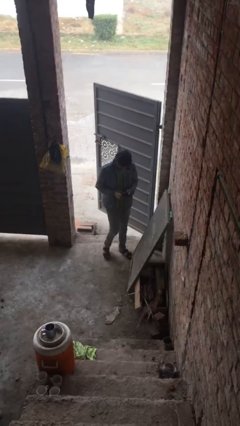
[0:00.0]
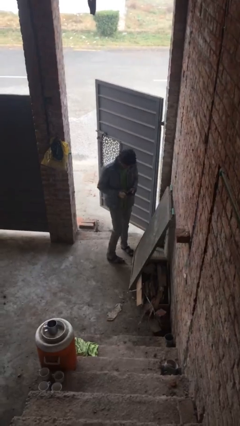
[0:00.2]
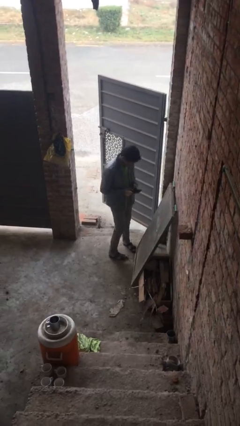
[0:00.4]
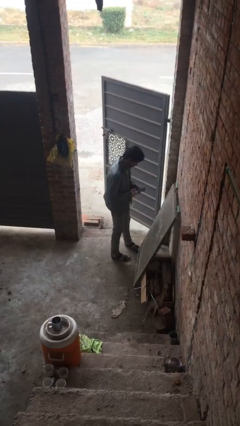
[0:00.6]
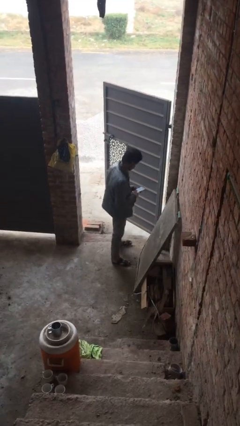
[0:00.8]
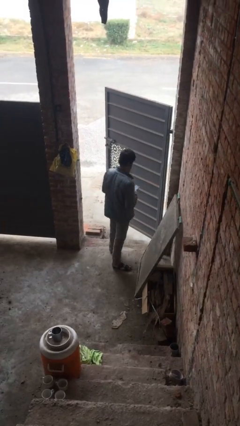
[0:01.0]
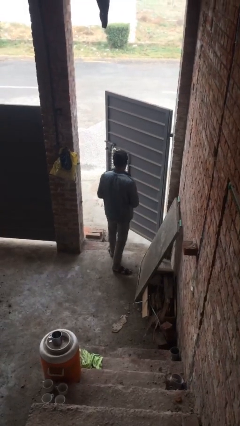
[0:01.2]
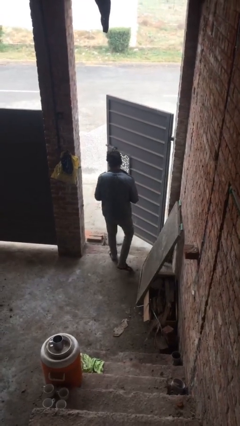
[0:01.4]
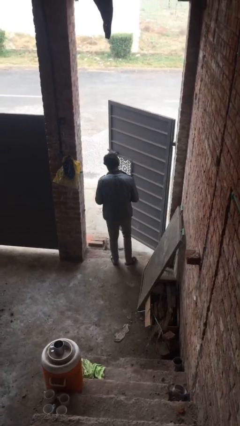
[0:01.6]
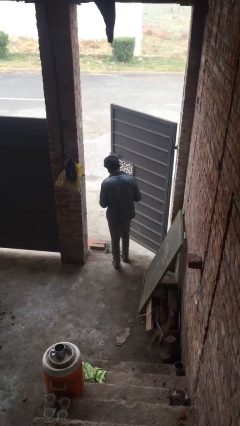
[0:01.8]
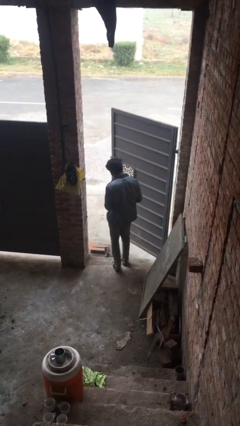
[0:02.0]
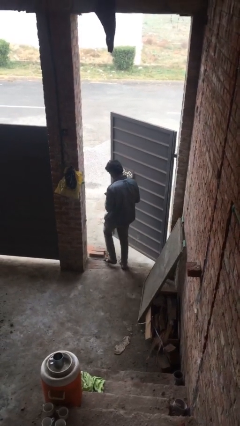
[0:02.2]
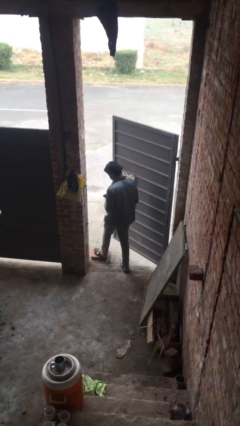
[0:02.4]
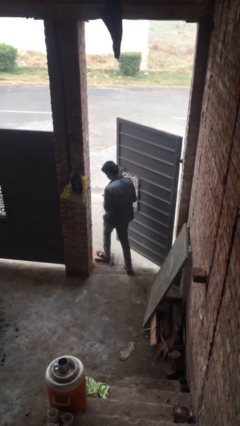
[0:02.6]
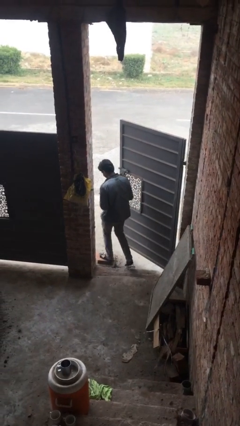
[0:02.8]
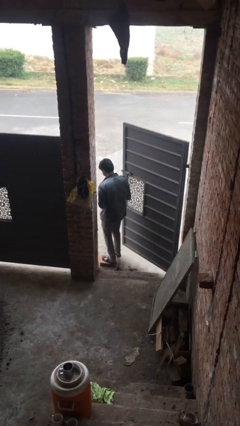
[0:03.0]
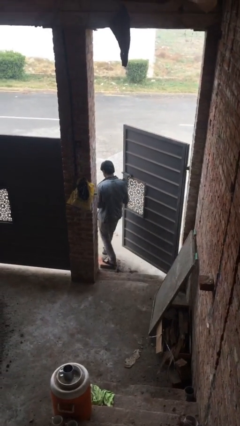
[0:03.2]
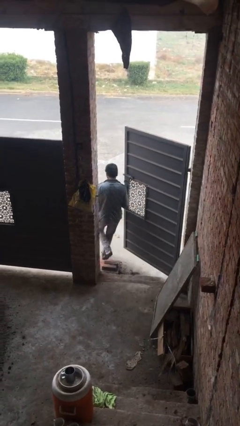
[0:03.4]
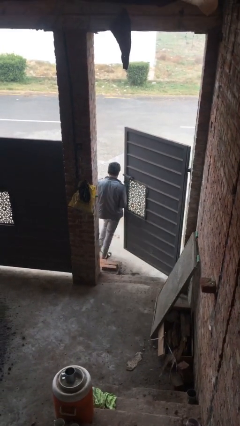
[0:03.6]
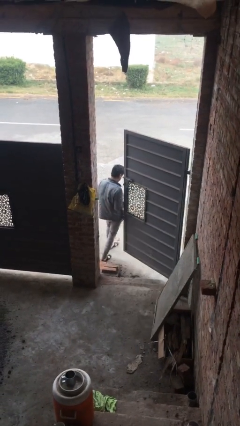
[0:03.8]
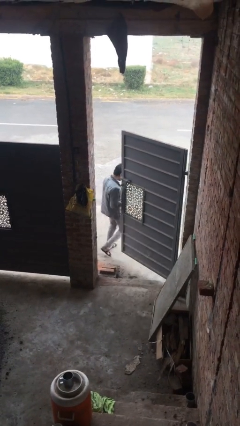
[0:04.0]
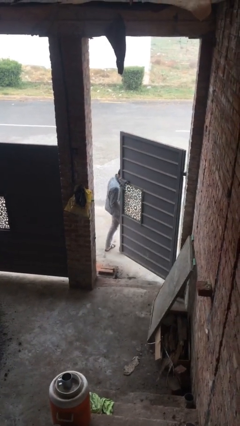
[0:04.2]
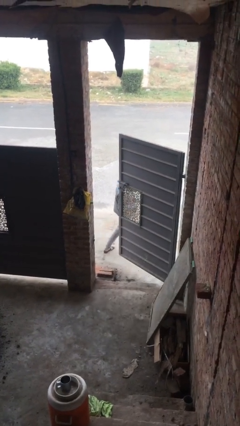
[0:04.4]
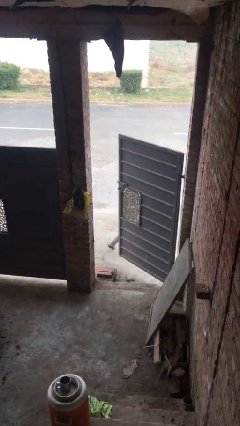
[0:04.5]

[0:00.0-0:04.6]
person exits scene through structure

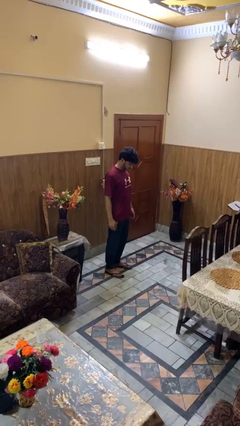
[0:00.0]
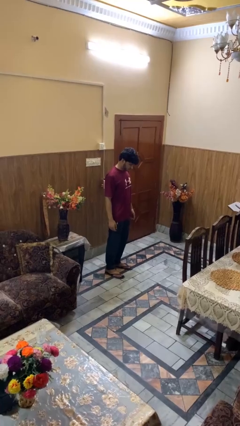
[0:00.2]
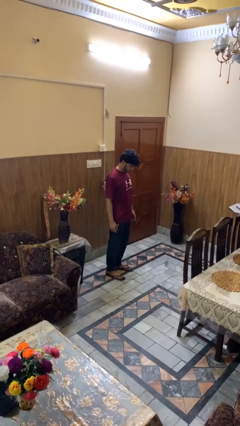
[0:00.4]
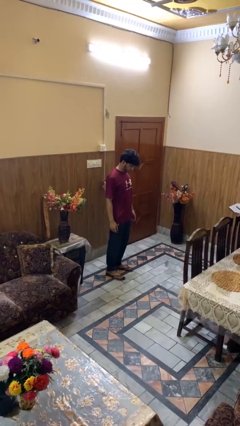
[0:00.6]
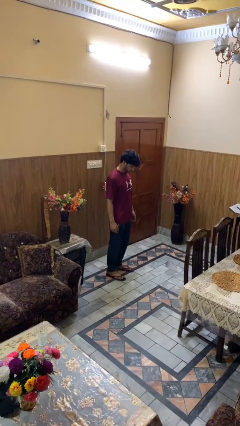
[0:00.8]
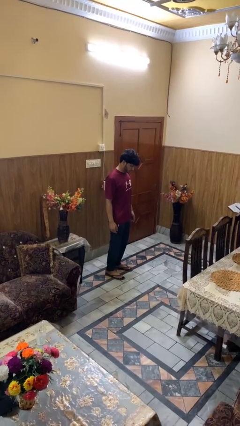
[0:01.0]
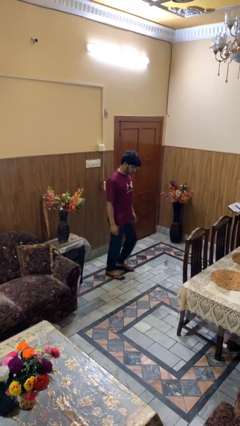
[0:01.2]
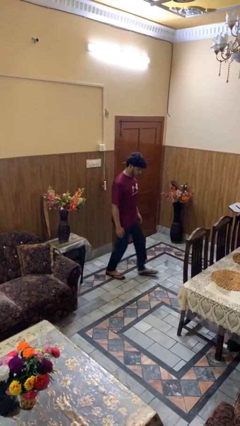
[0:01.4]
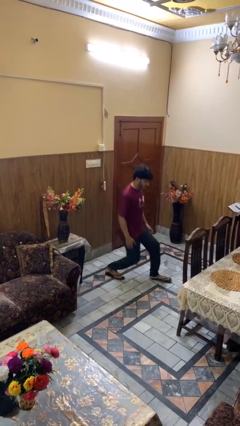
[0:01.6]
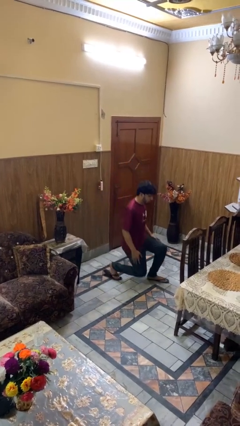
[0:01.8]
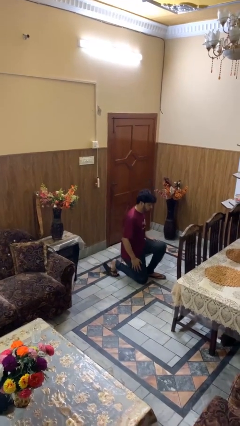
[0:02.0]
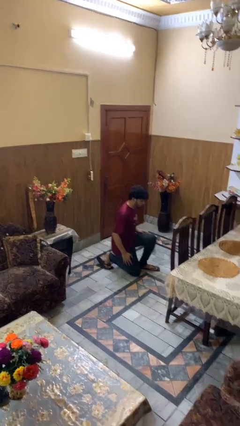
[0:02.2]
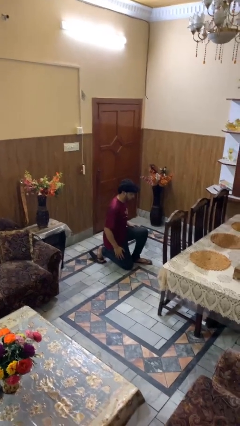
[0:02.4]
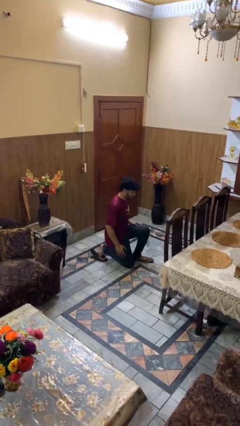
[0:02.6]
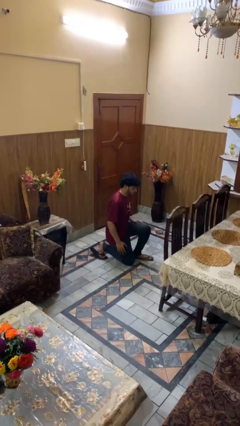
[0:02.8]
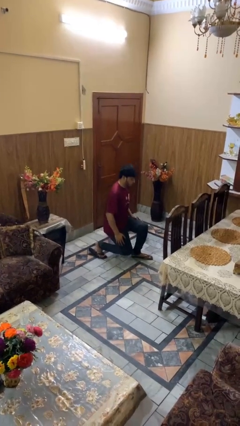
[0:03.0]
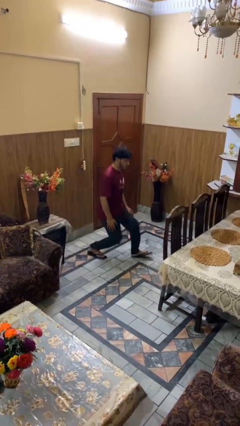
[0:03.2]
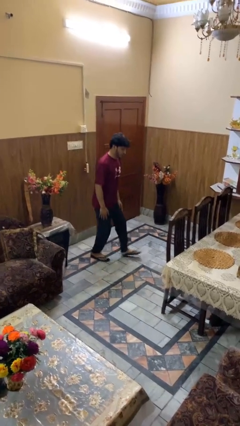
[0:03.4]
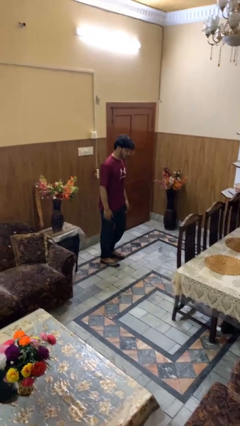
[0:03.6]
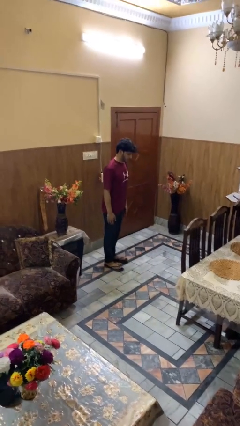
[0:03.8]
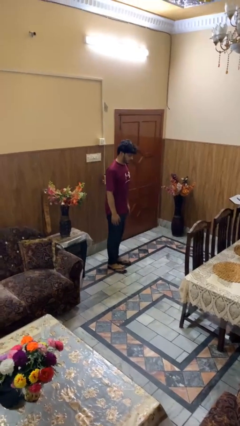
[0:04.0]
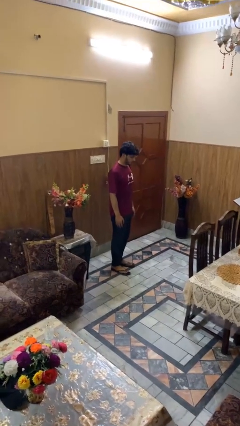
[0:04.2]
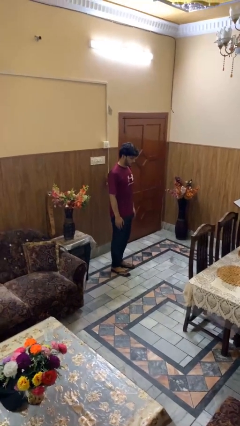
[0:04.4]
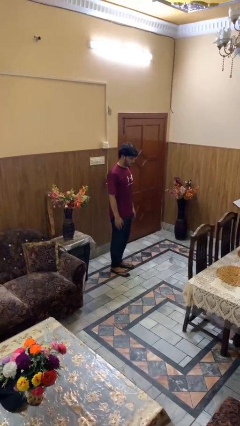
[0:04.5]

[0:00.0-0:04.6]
person exercises with lunges

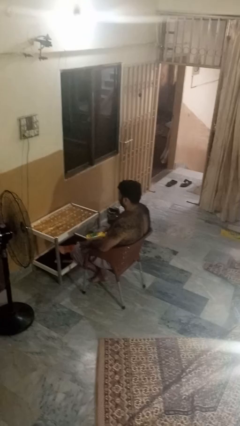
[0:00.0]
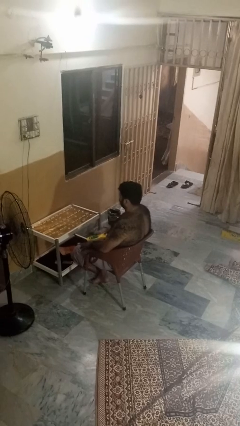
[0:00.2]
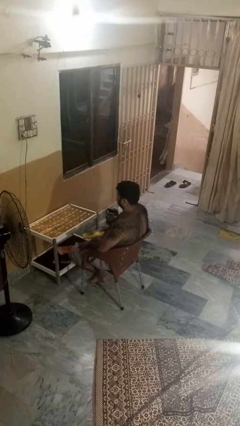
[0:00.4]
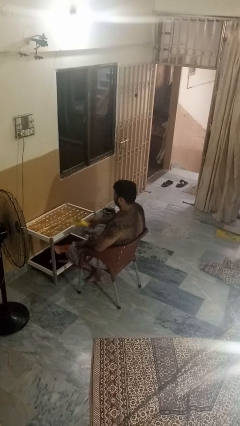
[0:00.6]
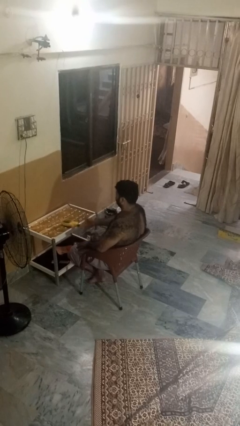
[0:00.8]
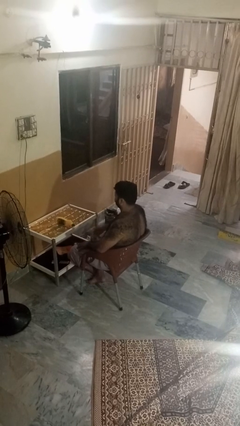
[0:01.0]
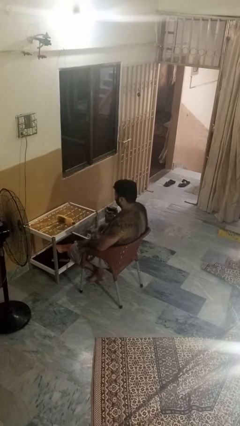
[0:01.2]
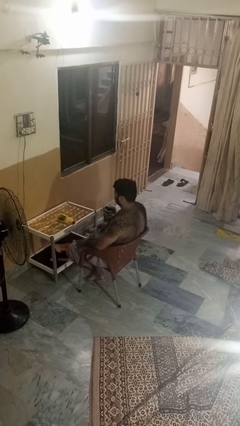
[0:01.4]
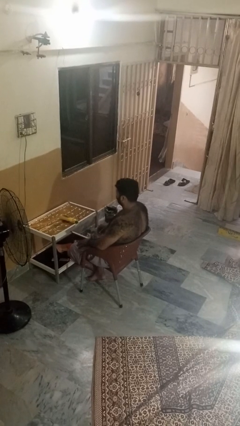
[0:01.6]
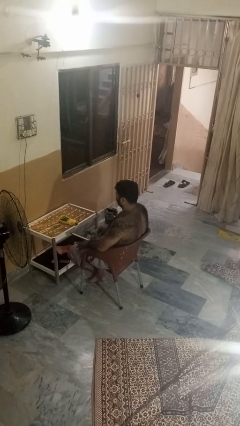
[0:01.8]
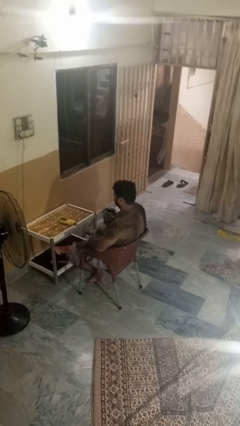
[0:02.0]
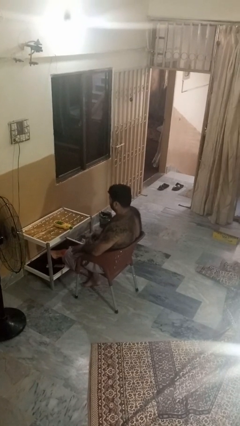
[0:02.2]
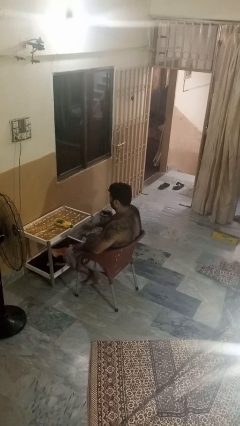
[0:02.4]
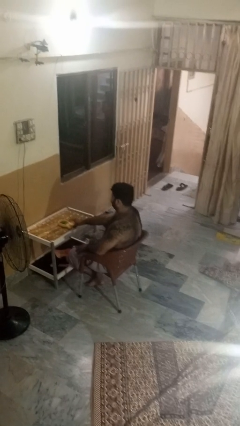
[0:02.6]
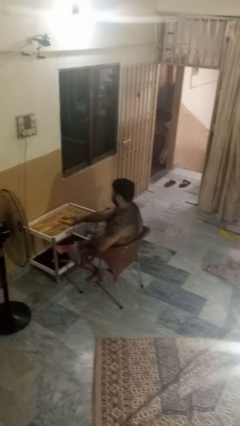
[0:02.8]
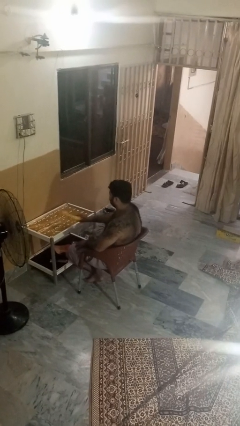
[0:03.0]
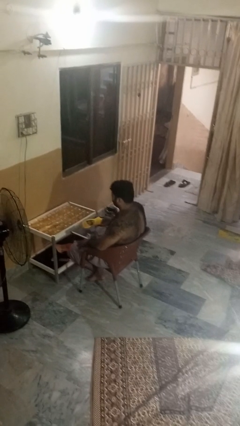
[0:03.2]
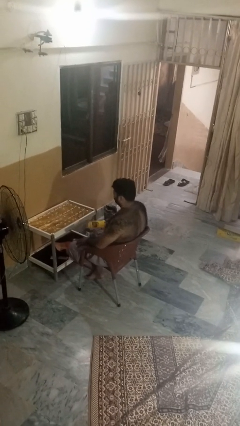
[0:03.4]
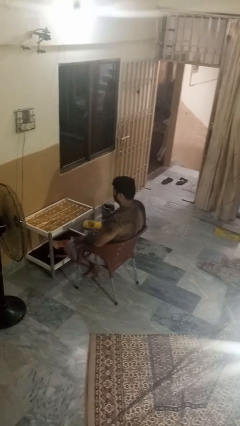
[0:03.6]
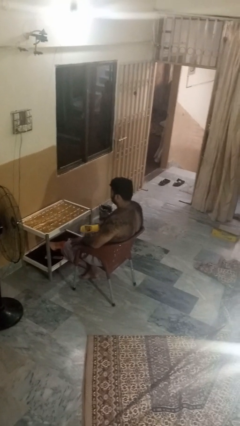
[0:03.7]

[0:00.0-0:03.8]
person throws object on table

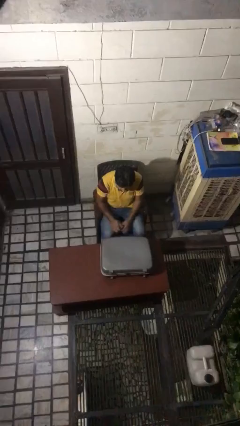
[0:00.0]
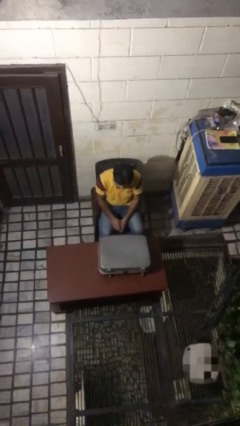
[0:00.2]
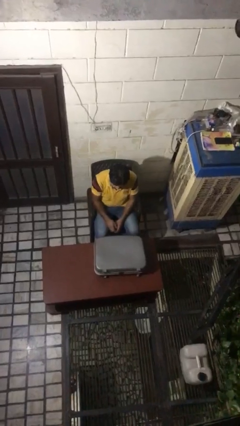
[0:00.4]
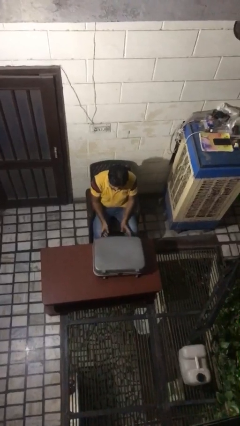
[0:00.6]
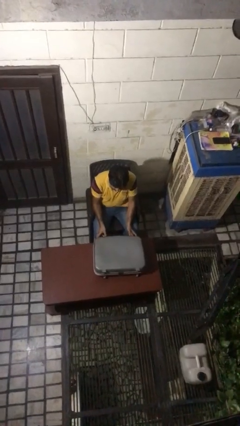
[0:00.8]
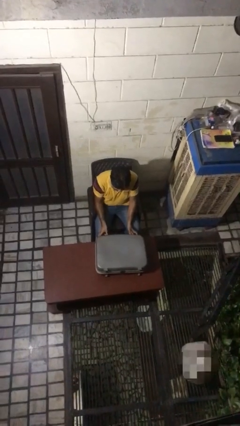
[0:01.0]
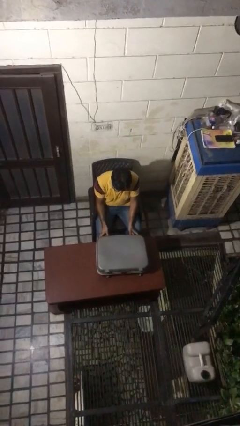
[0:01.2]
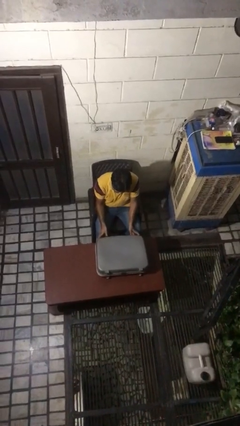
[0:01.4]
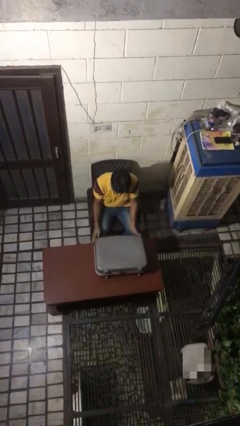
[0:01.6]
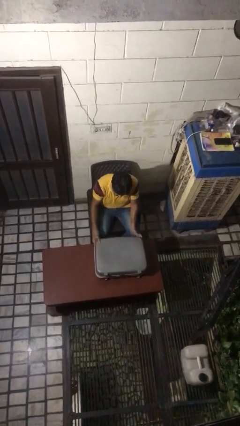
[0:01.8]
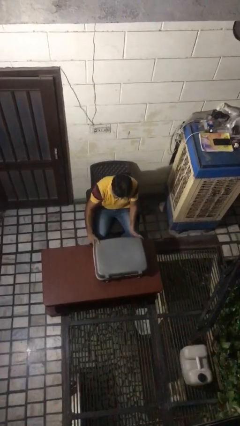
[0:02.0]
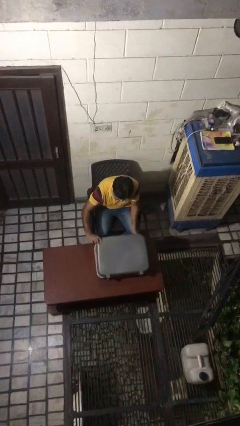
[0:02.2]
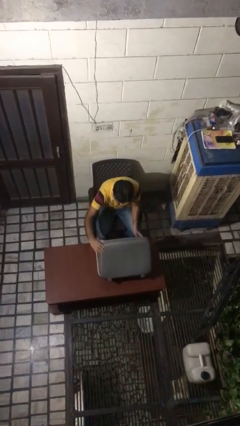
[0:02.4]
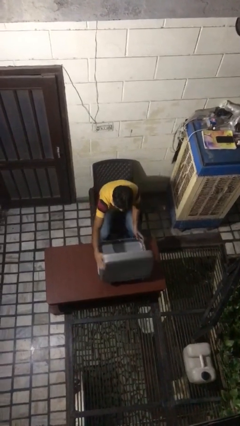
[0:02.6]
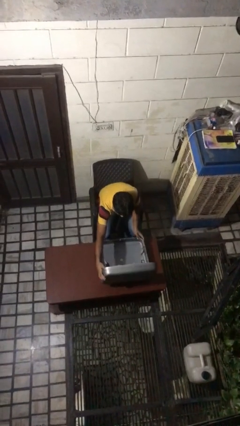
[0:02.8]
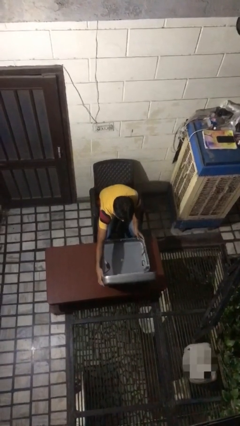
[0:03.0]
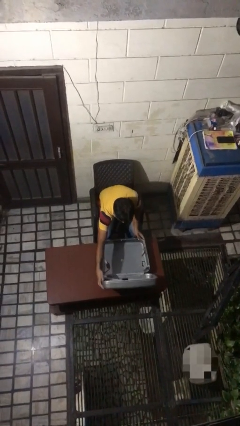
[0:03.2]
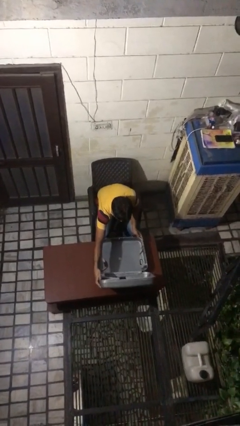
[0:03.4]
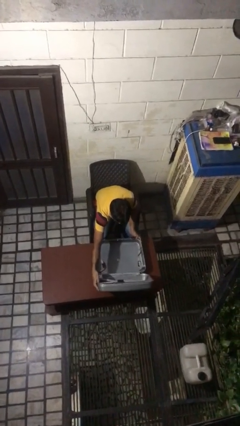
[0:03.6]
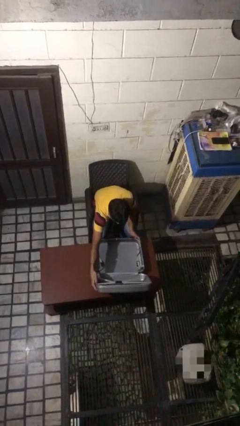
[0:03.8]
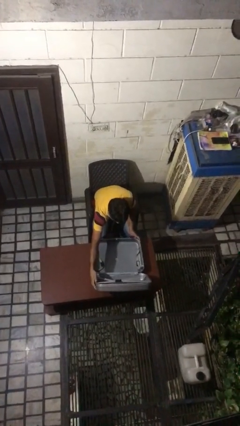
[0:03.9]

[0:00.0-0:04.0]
person opens suitcase

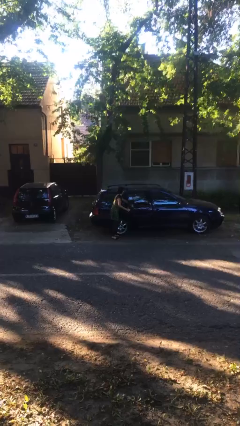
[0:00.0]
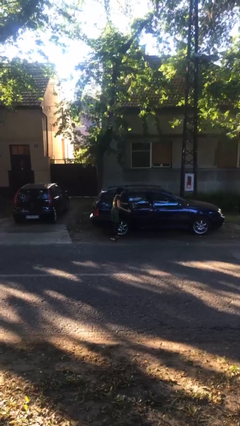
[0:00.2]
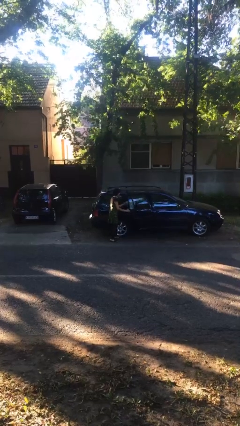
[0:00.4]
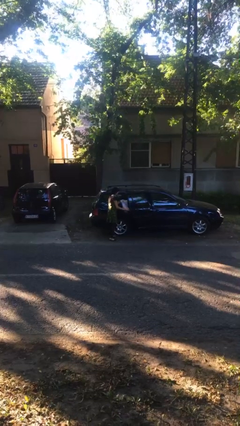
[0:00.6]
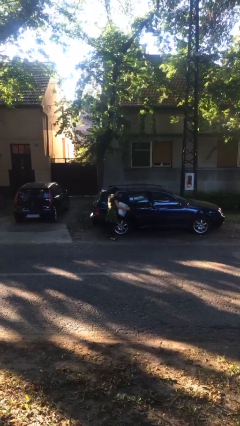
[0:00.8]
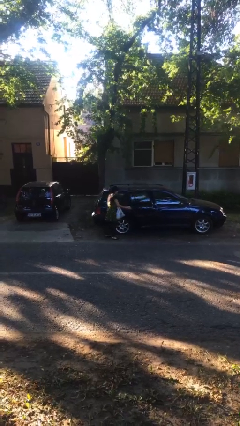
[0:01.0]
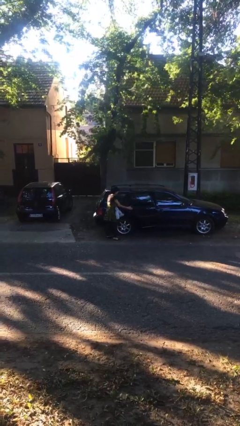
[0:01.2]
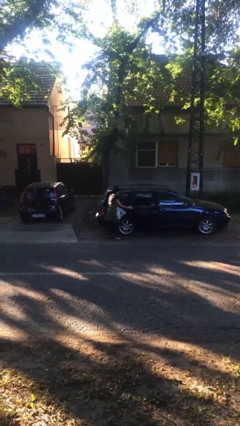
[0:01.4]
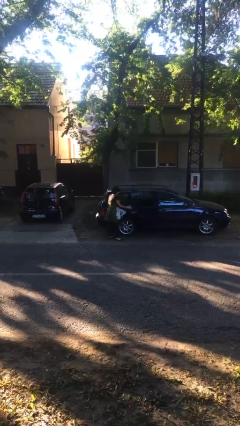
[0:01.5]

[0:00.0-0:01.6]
person unloads car
